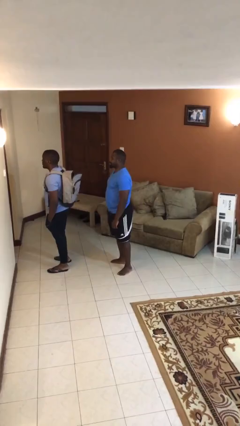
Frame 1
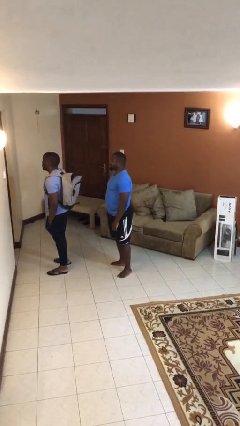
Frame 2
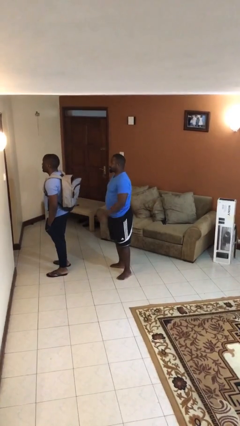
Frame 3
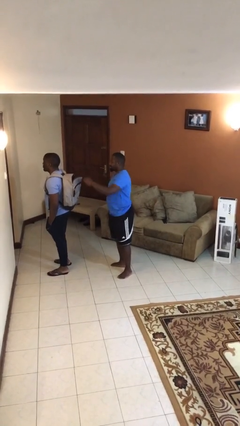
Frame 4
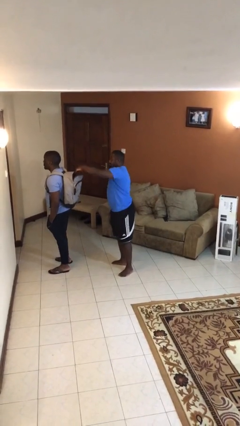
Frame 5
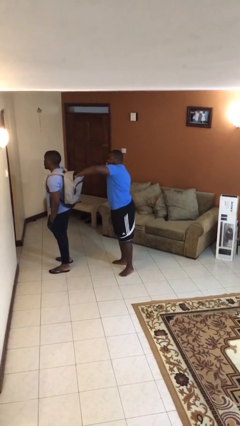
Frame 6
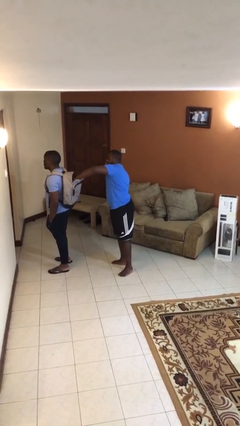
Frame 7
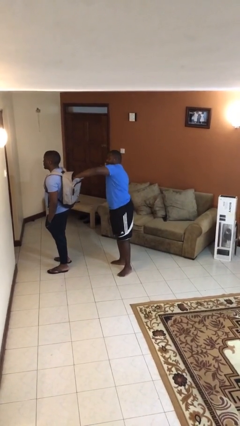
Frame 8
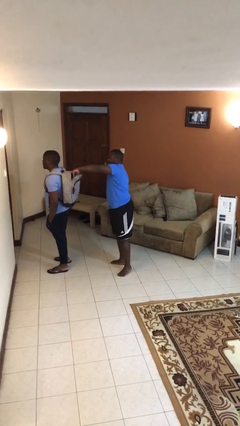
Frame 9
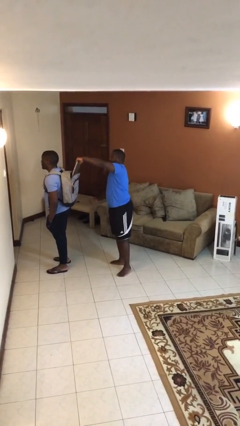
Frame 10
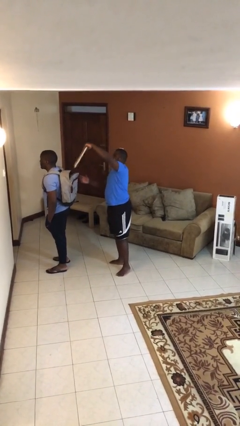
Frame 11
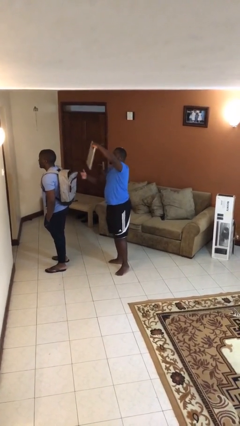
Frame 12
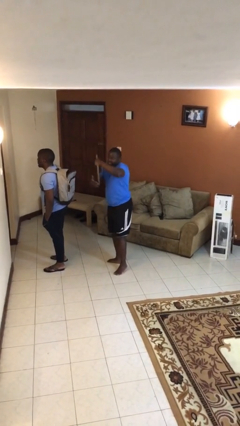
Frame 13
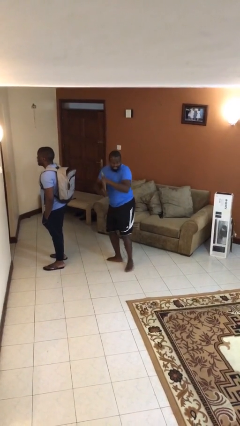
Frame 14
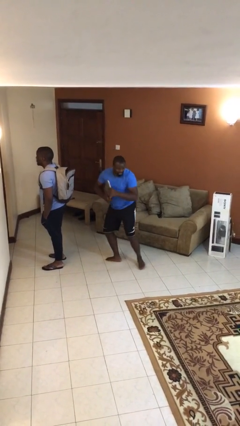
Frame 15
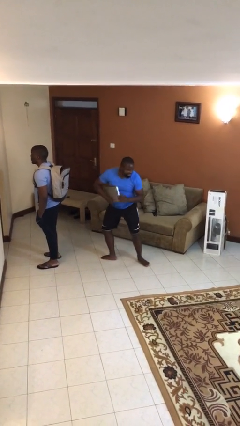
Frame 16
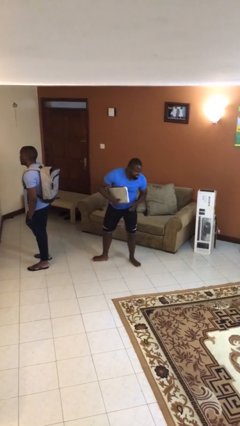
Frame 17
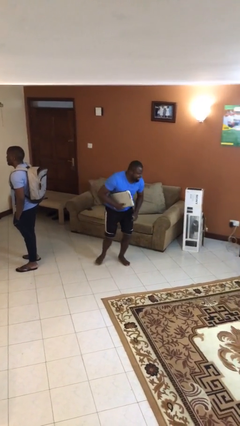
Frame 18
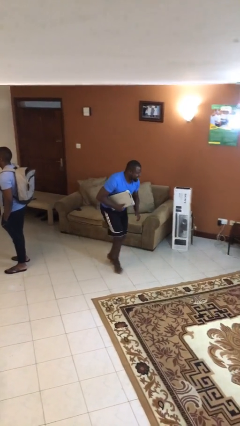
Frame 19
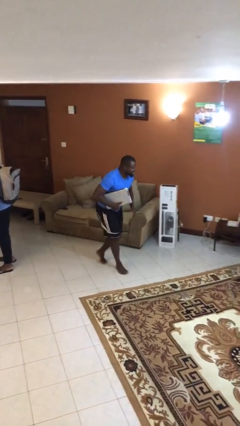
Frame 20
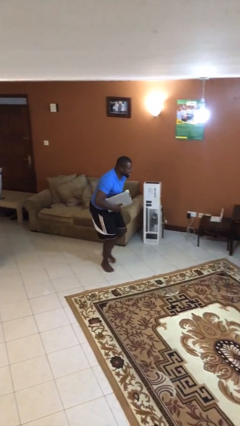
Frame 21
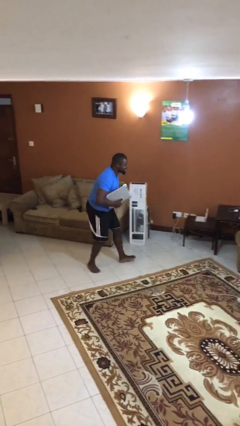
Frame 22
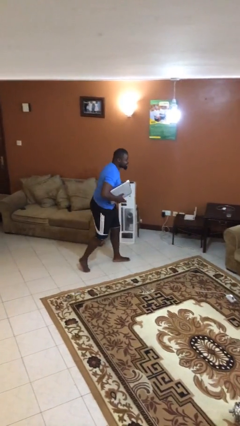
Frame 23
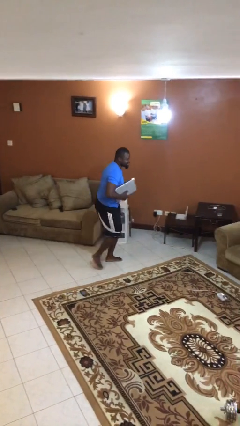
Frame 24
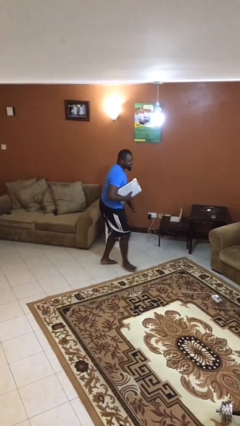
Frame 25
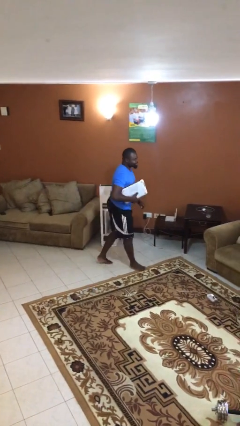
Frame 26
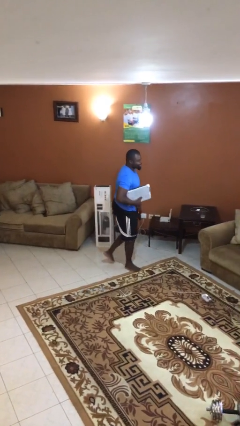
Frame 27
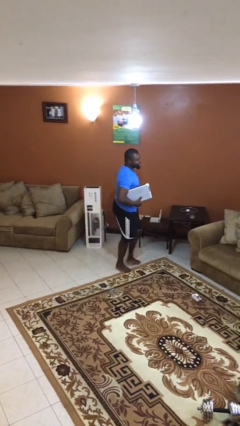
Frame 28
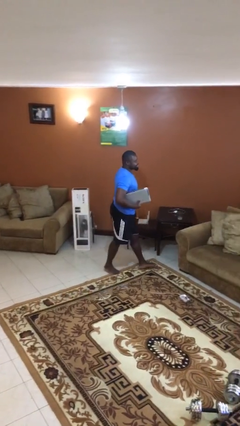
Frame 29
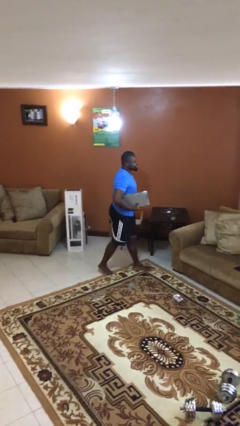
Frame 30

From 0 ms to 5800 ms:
person steals object from person

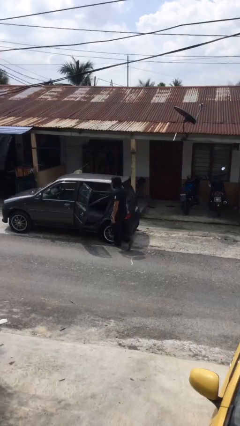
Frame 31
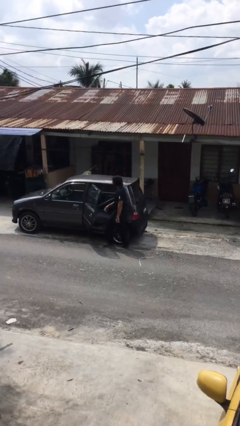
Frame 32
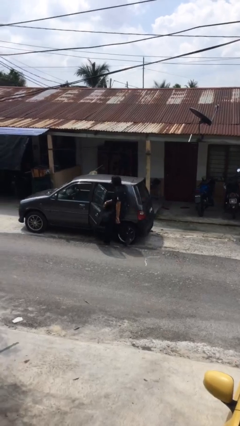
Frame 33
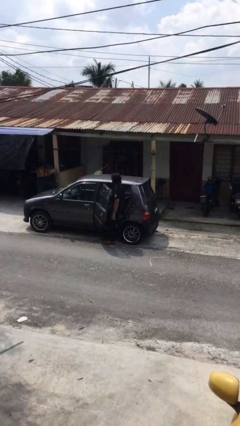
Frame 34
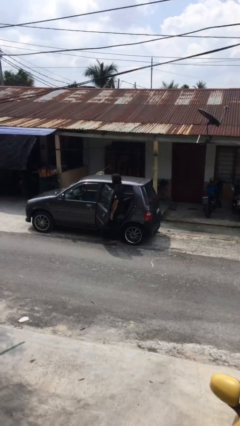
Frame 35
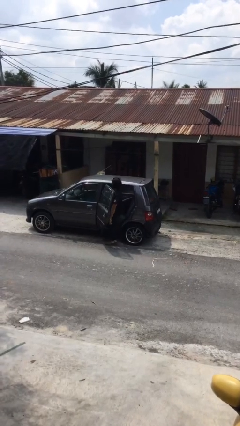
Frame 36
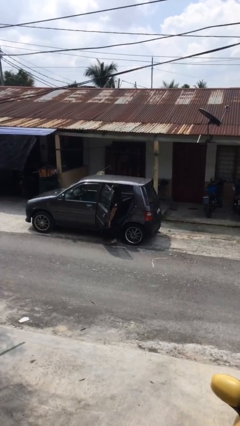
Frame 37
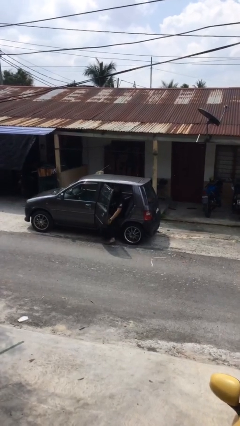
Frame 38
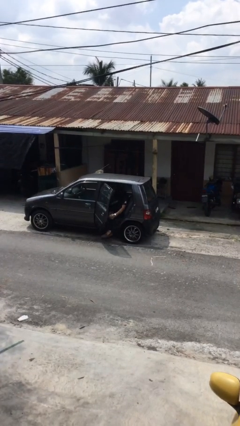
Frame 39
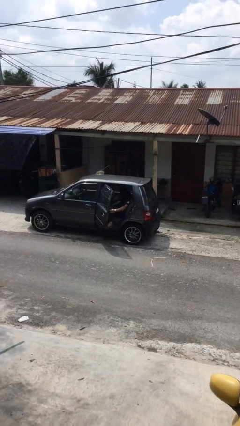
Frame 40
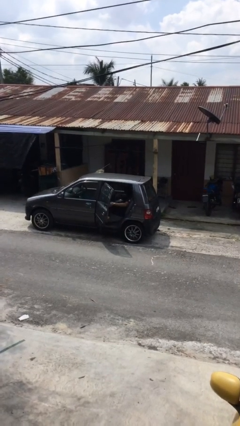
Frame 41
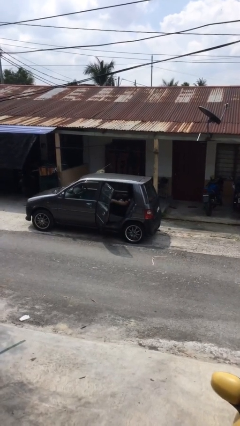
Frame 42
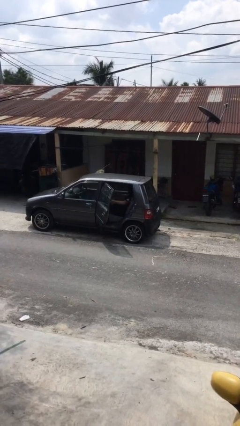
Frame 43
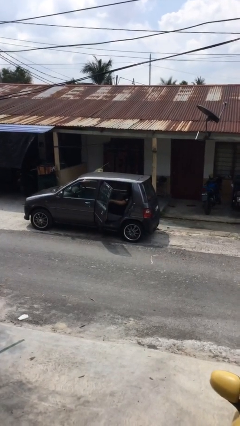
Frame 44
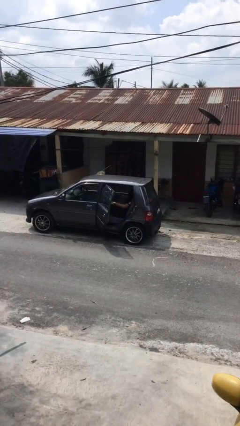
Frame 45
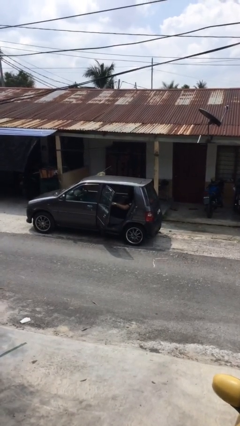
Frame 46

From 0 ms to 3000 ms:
person enters car

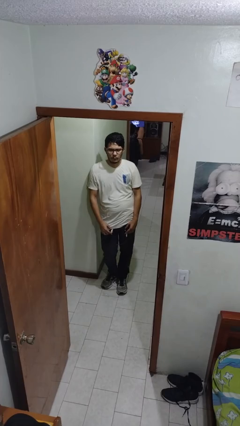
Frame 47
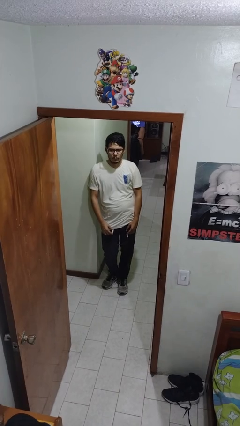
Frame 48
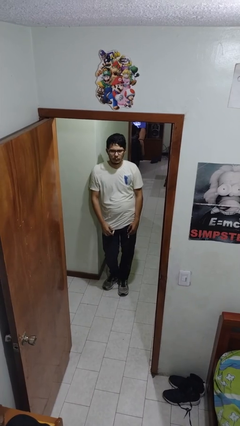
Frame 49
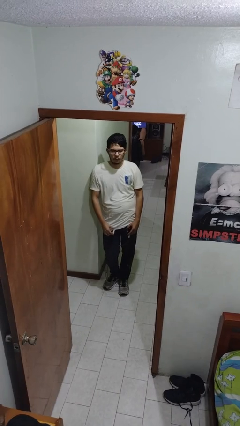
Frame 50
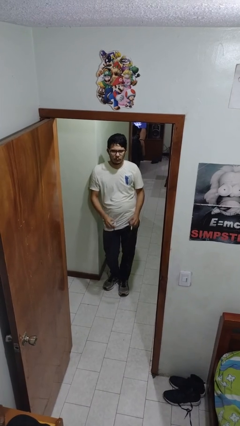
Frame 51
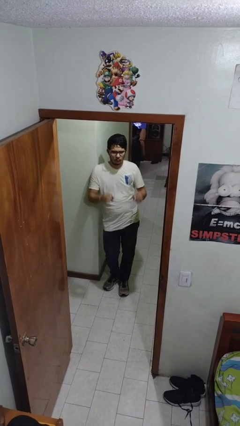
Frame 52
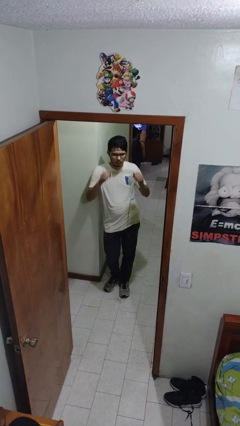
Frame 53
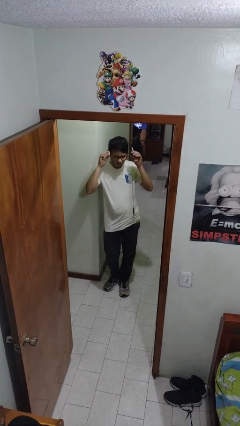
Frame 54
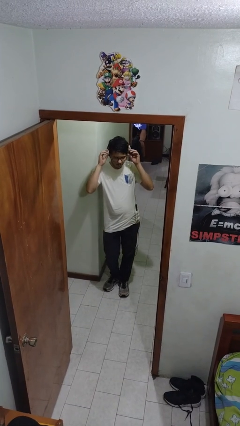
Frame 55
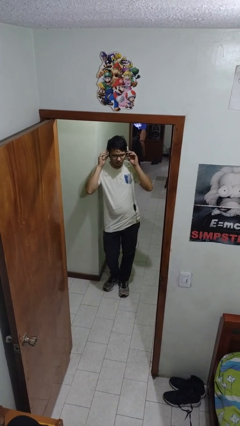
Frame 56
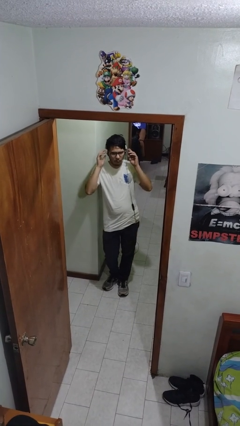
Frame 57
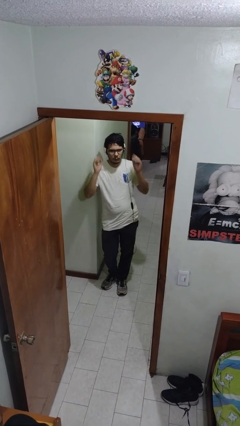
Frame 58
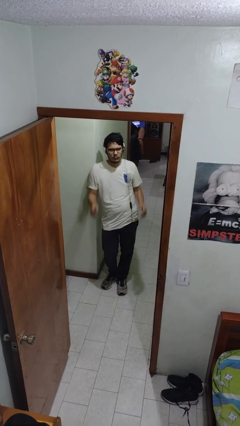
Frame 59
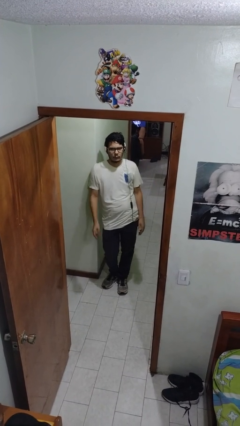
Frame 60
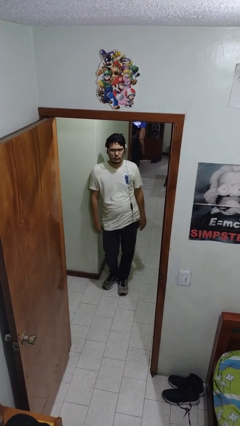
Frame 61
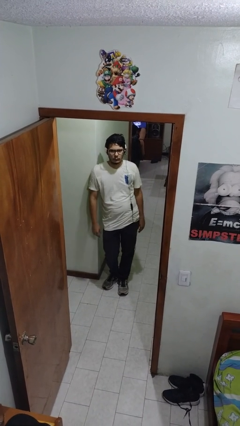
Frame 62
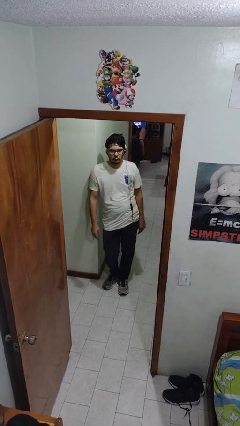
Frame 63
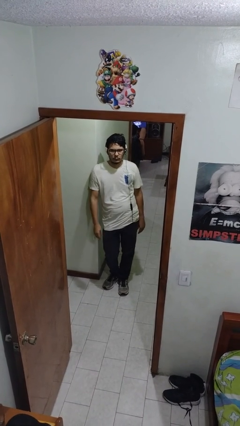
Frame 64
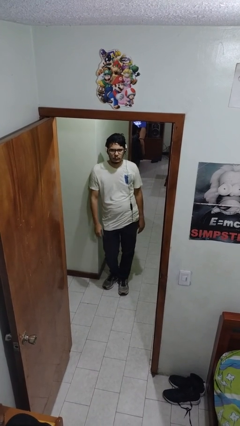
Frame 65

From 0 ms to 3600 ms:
person puts on headphones

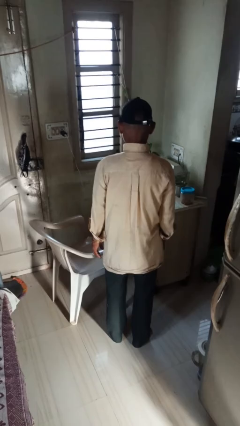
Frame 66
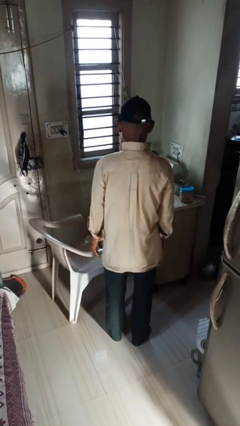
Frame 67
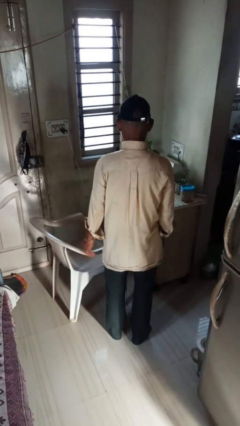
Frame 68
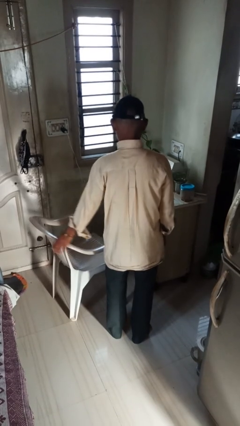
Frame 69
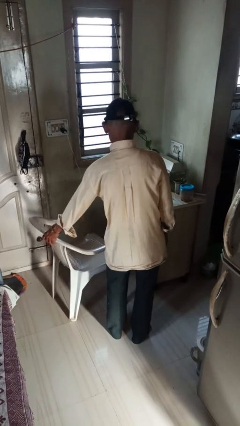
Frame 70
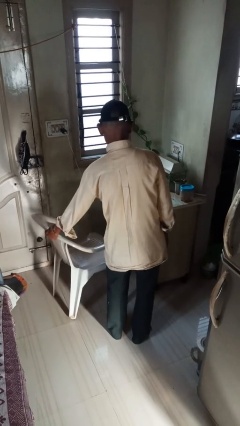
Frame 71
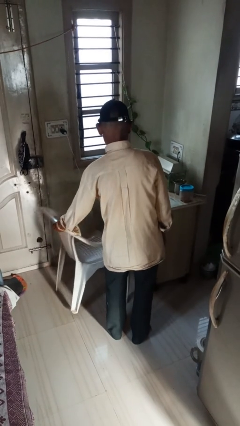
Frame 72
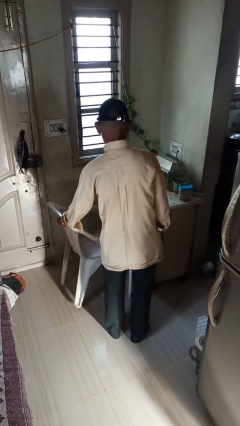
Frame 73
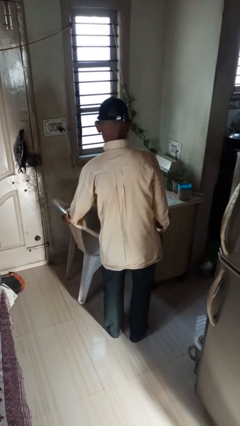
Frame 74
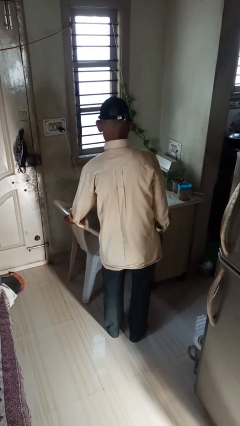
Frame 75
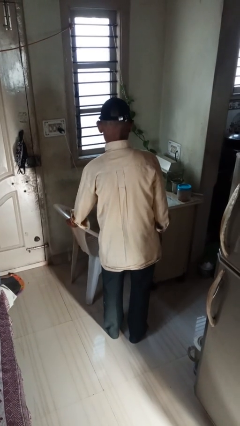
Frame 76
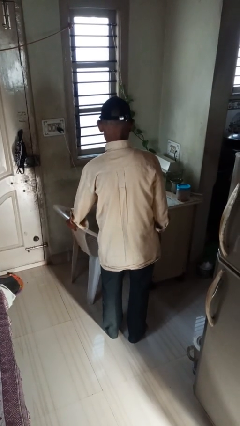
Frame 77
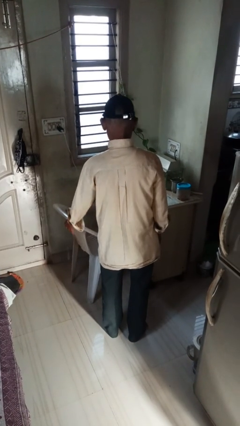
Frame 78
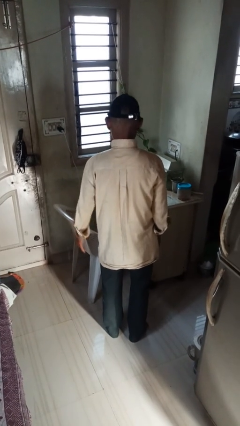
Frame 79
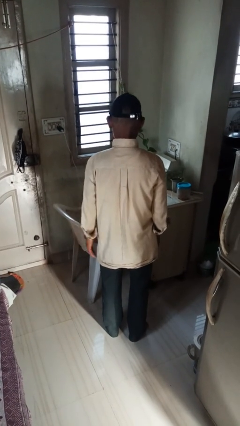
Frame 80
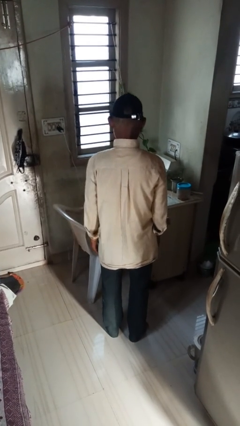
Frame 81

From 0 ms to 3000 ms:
person pushes in chair

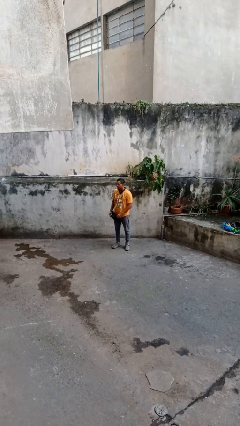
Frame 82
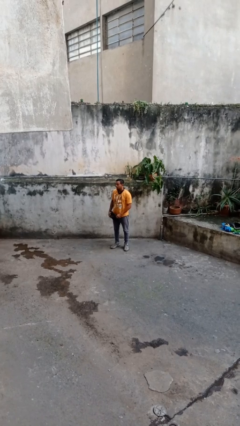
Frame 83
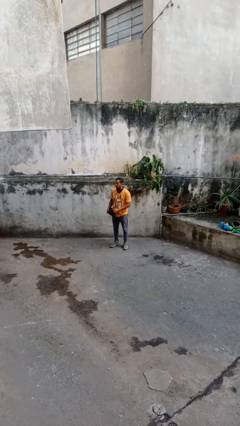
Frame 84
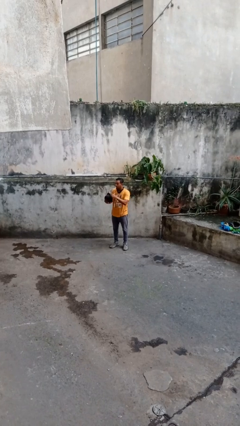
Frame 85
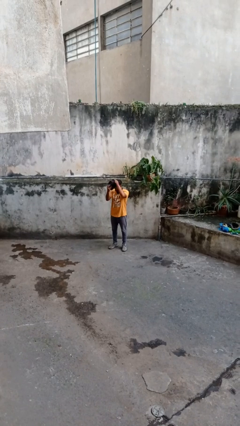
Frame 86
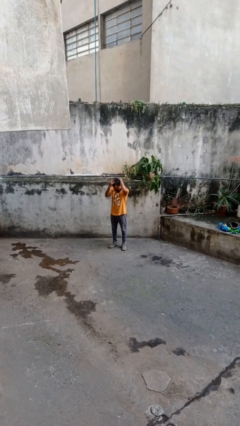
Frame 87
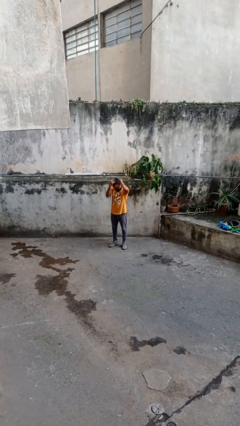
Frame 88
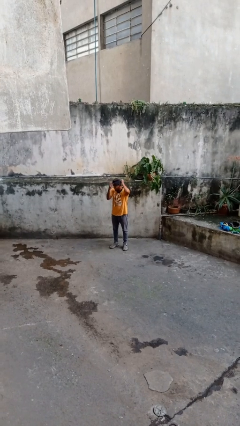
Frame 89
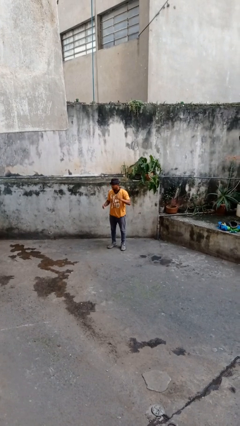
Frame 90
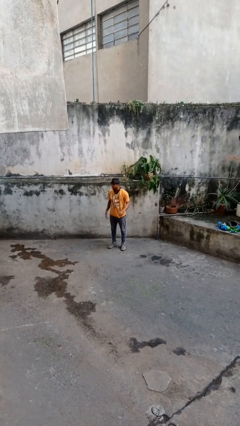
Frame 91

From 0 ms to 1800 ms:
person puts on hat
